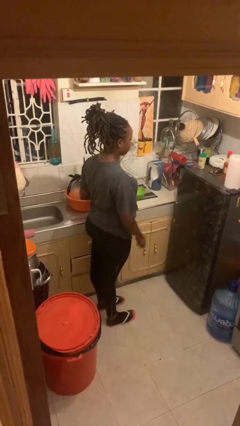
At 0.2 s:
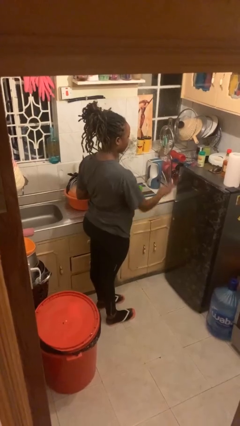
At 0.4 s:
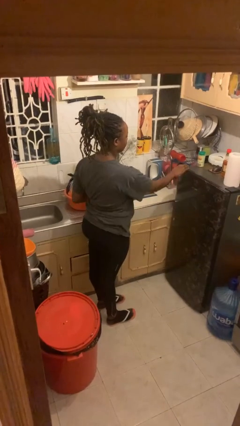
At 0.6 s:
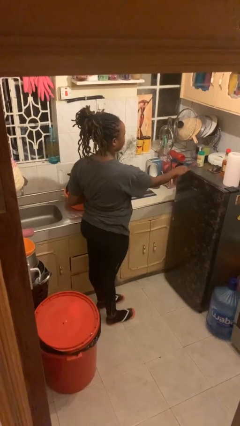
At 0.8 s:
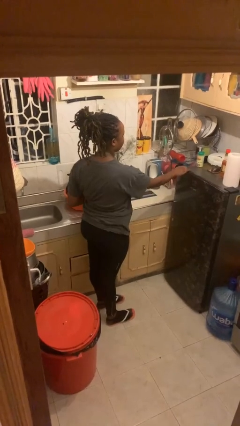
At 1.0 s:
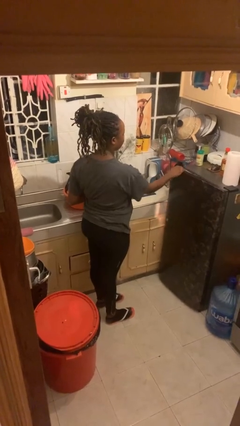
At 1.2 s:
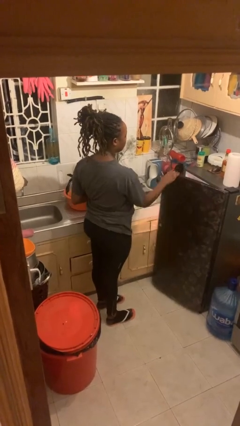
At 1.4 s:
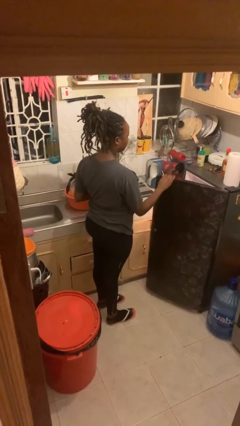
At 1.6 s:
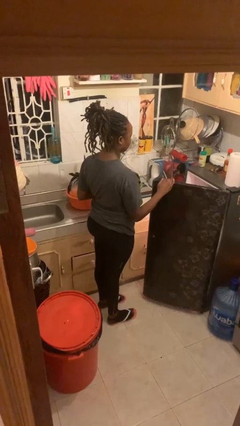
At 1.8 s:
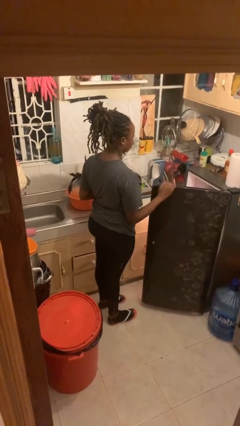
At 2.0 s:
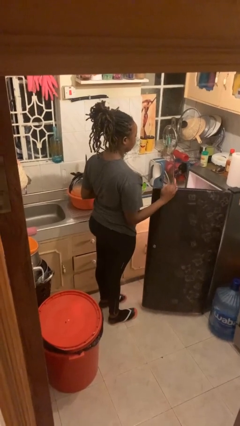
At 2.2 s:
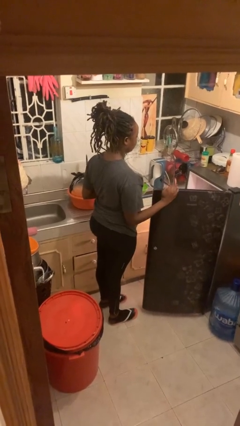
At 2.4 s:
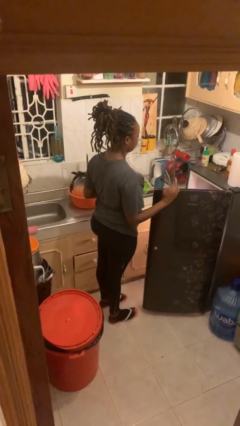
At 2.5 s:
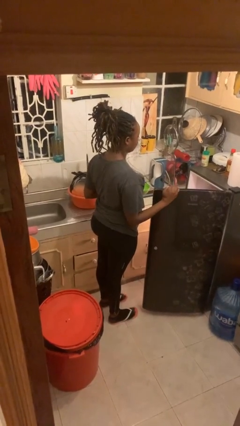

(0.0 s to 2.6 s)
person opens refrigerator

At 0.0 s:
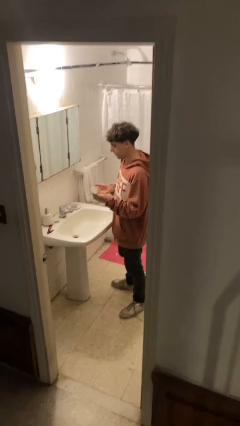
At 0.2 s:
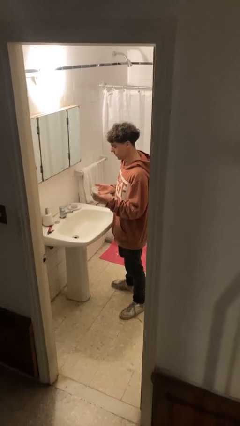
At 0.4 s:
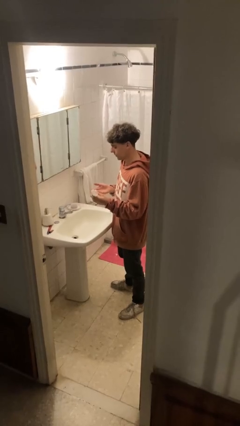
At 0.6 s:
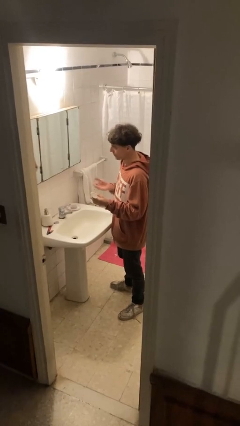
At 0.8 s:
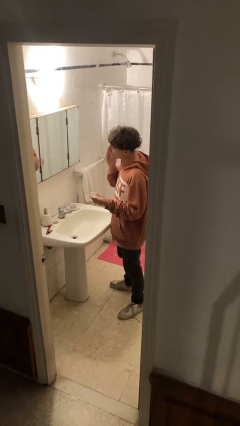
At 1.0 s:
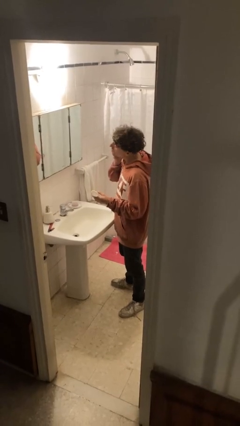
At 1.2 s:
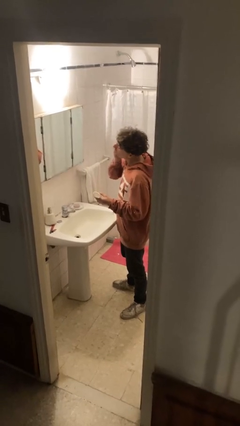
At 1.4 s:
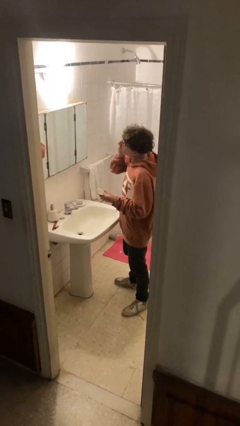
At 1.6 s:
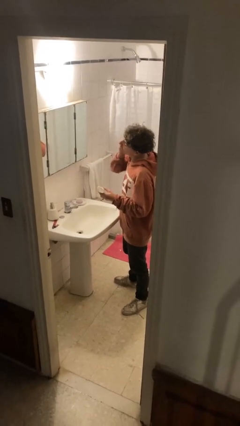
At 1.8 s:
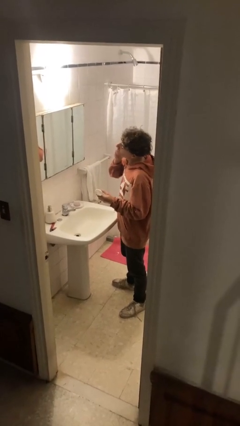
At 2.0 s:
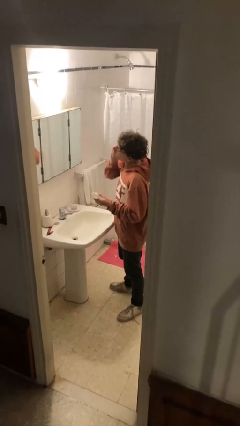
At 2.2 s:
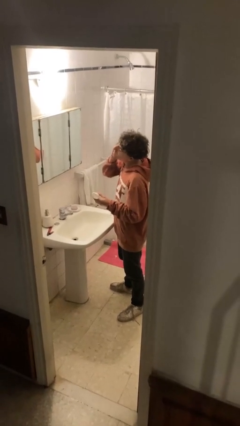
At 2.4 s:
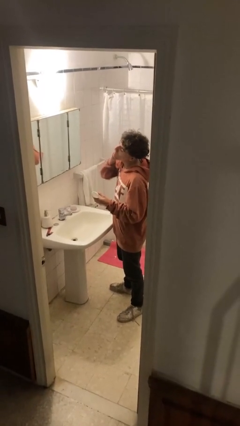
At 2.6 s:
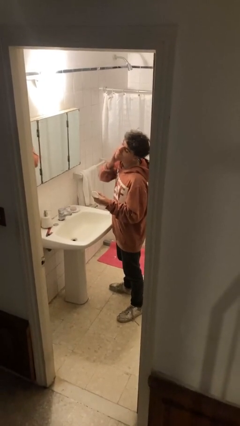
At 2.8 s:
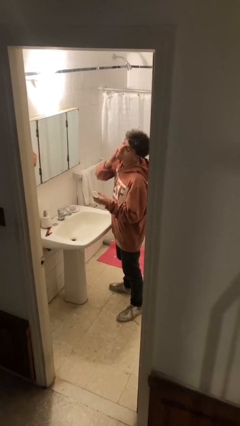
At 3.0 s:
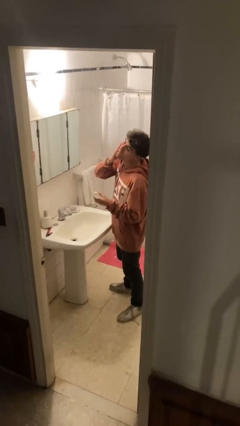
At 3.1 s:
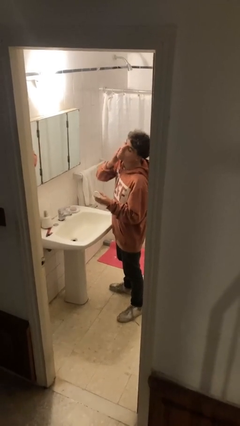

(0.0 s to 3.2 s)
person applies foundation makeup

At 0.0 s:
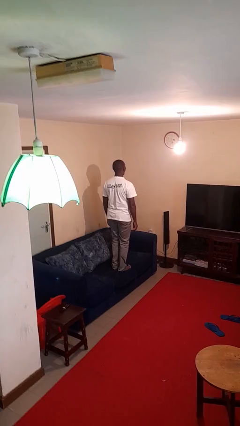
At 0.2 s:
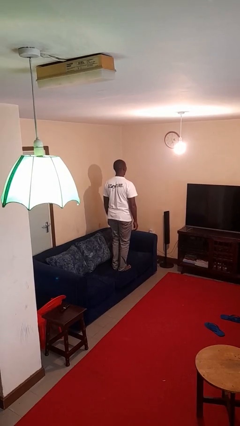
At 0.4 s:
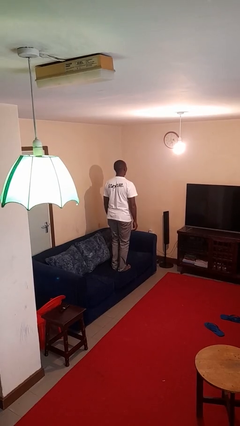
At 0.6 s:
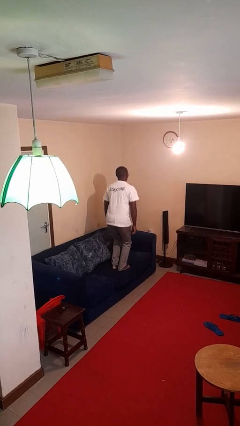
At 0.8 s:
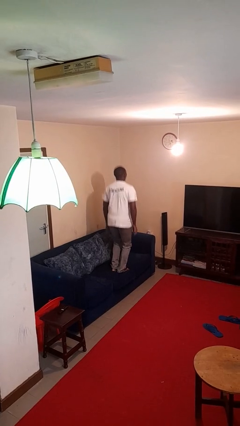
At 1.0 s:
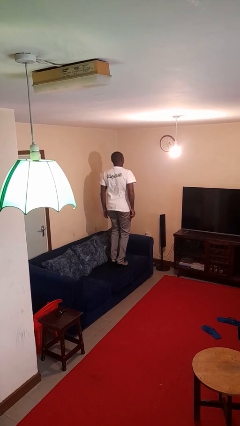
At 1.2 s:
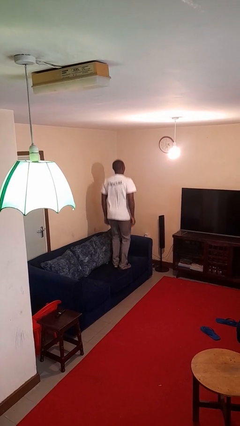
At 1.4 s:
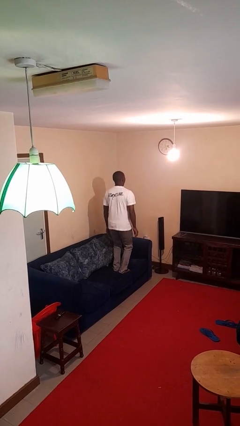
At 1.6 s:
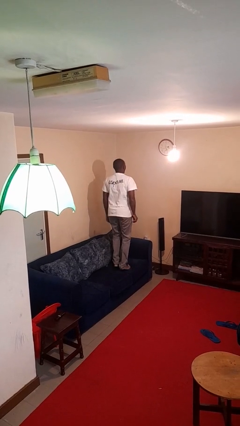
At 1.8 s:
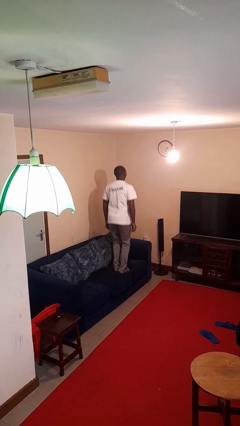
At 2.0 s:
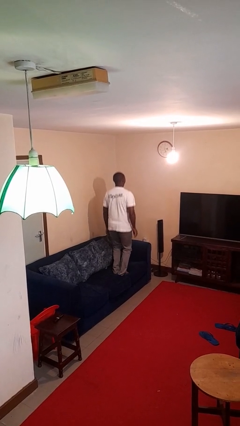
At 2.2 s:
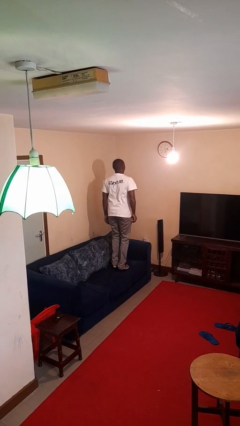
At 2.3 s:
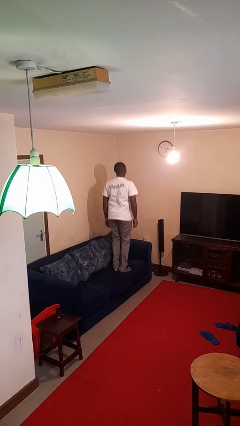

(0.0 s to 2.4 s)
person jumps on couch

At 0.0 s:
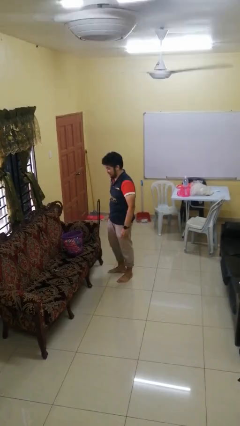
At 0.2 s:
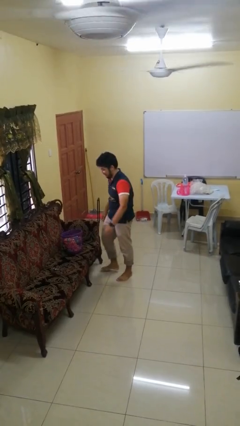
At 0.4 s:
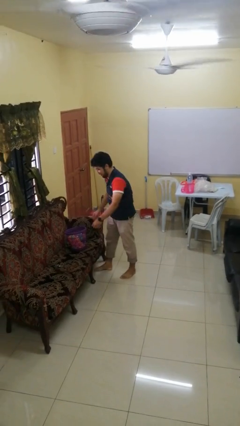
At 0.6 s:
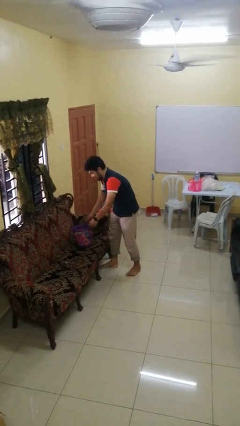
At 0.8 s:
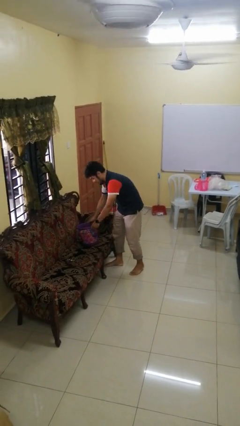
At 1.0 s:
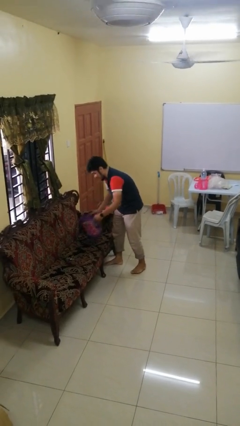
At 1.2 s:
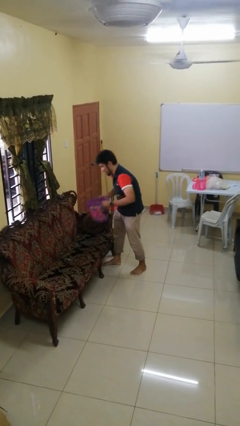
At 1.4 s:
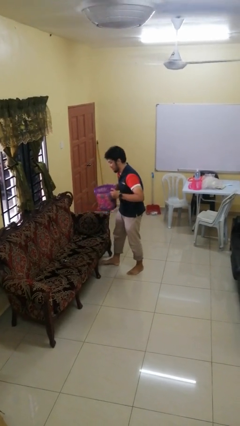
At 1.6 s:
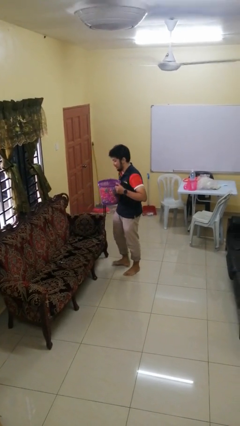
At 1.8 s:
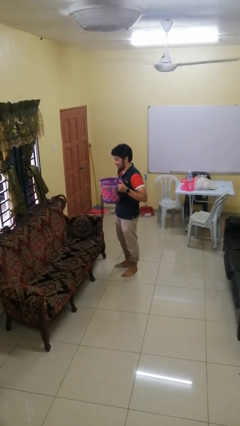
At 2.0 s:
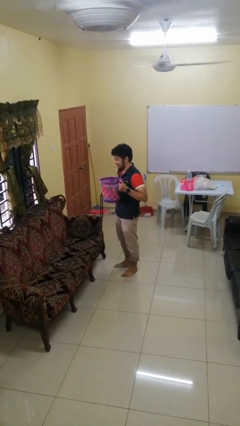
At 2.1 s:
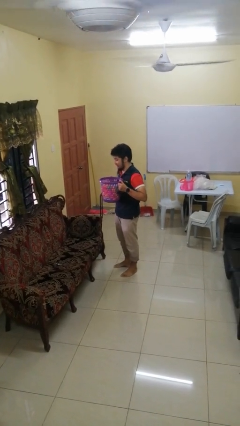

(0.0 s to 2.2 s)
person picks up object from couch

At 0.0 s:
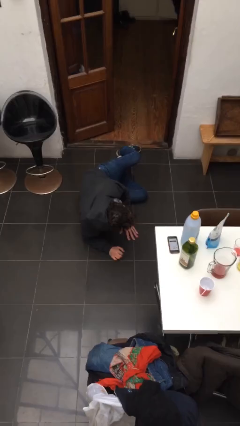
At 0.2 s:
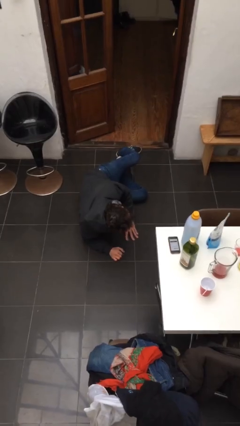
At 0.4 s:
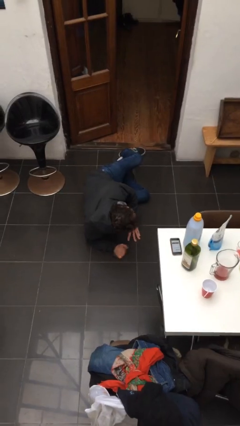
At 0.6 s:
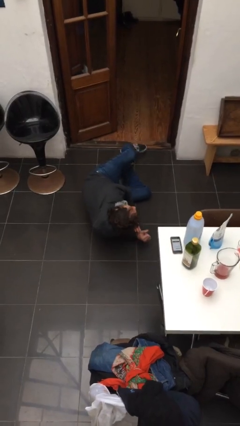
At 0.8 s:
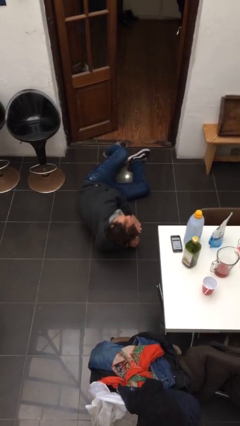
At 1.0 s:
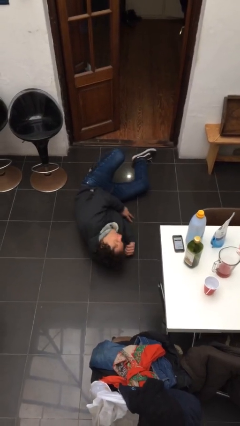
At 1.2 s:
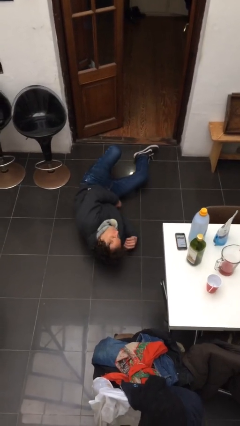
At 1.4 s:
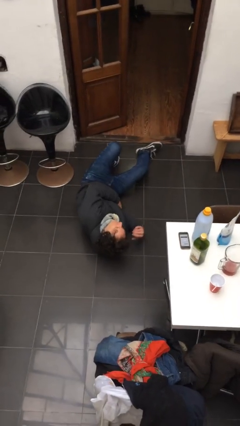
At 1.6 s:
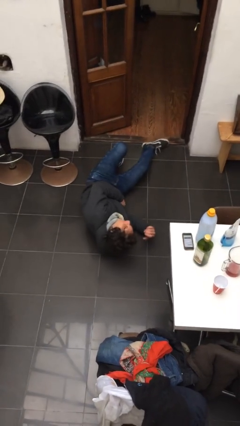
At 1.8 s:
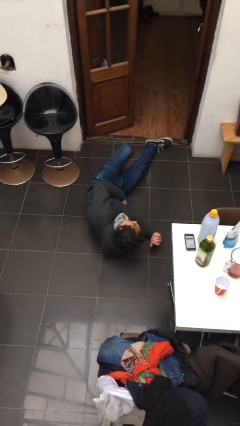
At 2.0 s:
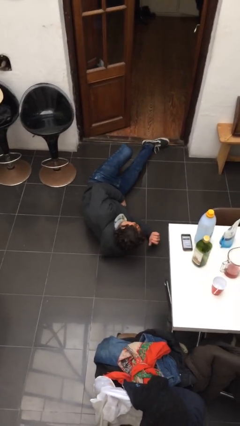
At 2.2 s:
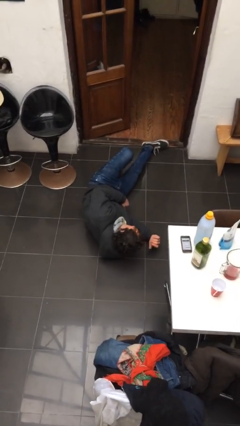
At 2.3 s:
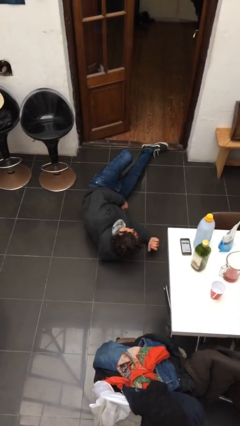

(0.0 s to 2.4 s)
person lies down on floor

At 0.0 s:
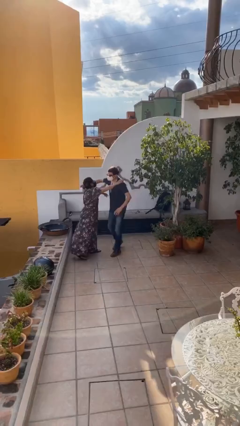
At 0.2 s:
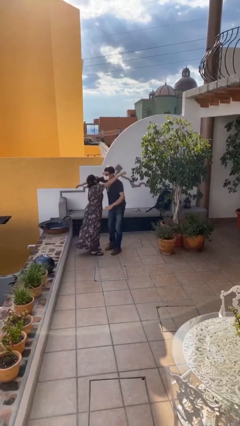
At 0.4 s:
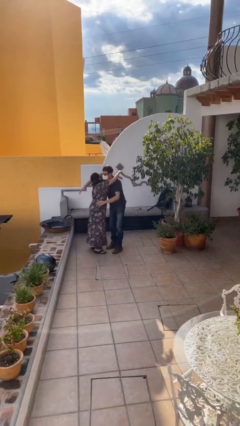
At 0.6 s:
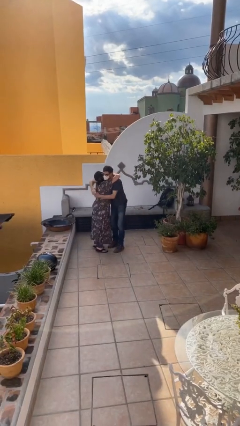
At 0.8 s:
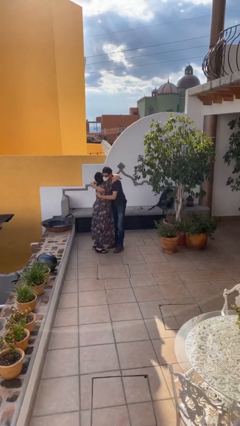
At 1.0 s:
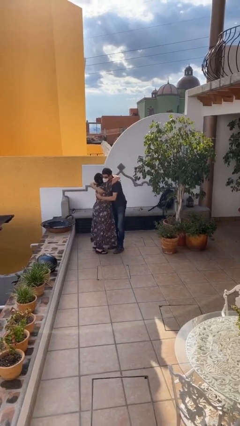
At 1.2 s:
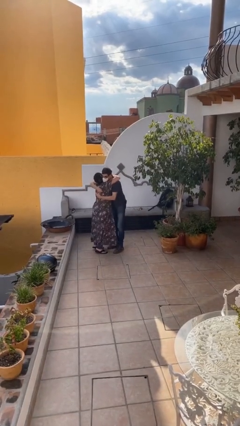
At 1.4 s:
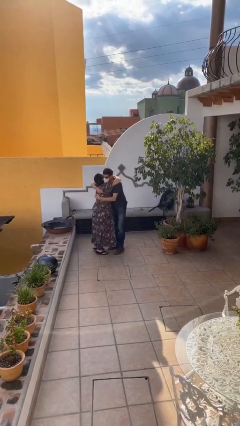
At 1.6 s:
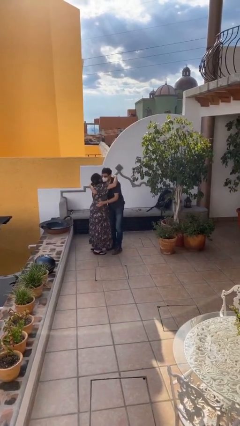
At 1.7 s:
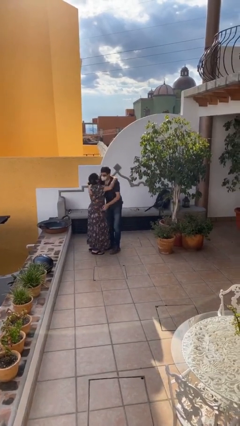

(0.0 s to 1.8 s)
person embraces person

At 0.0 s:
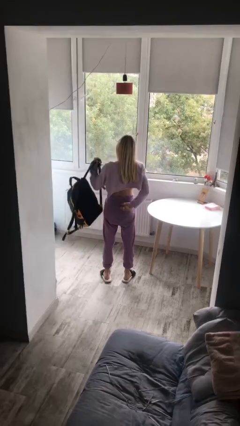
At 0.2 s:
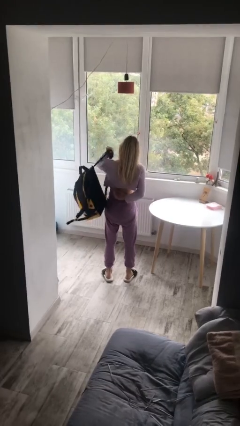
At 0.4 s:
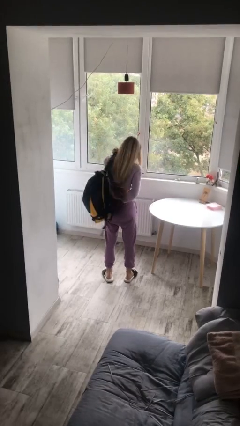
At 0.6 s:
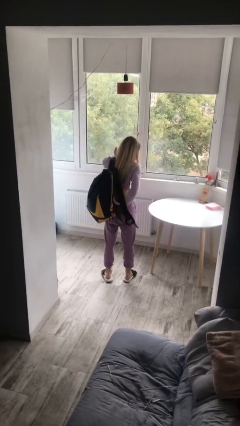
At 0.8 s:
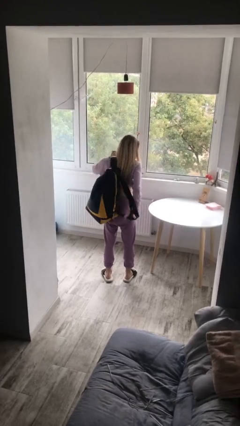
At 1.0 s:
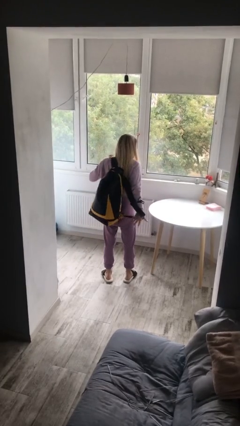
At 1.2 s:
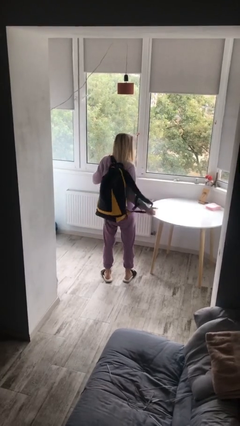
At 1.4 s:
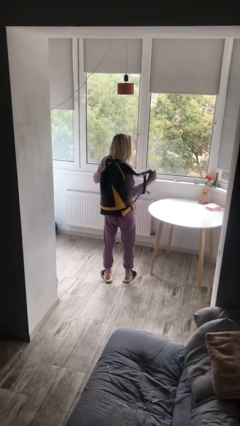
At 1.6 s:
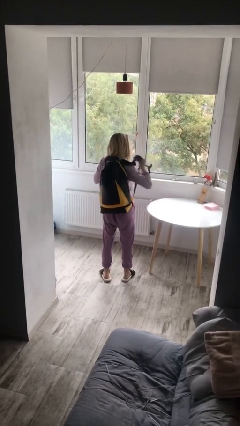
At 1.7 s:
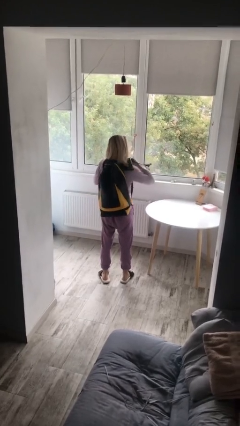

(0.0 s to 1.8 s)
person puts on backpack

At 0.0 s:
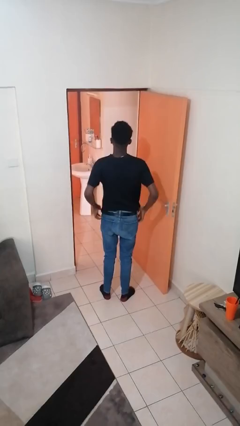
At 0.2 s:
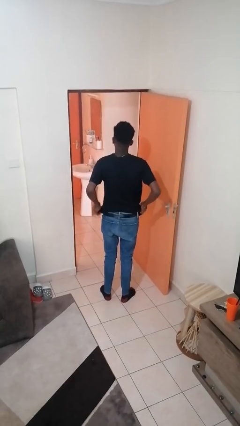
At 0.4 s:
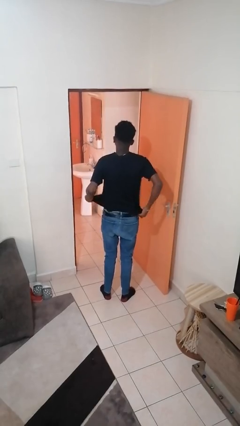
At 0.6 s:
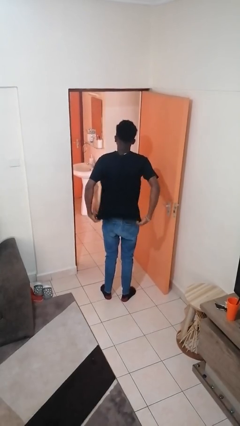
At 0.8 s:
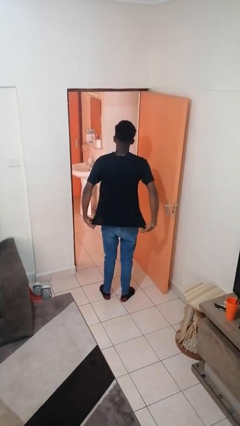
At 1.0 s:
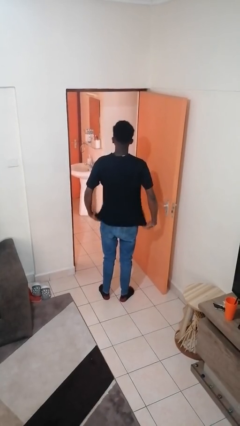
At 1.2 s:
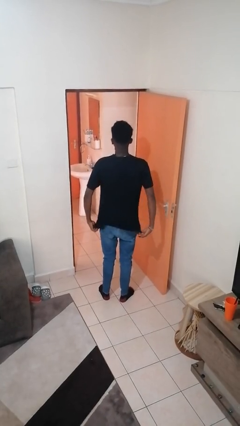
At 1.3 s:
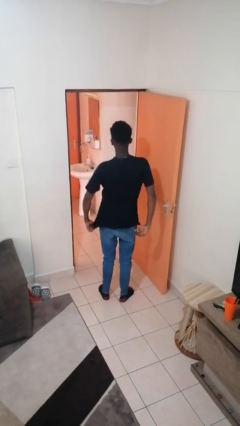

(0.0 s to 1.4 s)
person untucks shirt
